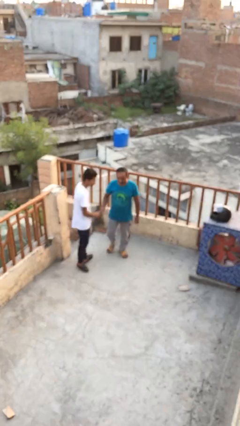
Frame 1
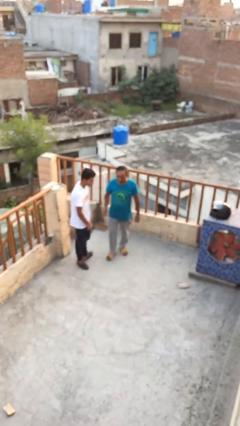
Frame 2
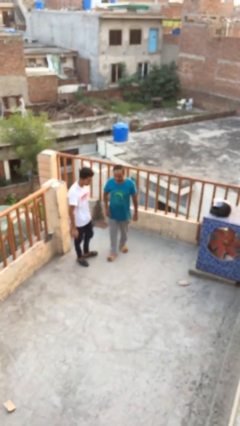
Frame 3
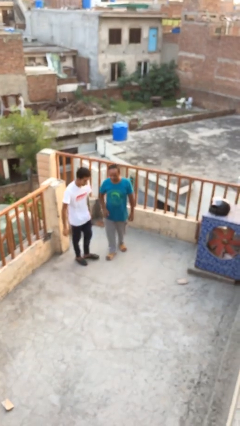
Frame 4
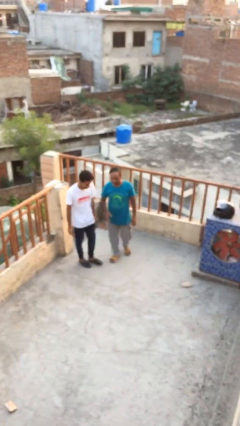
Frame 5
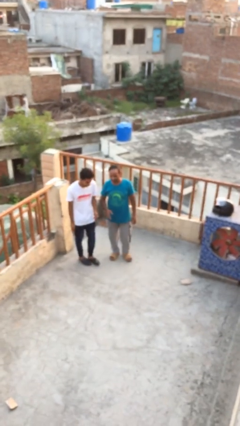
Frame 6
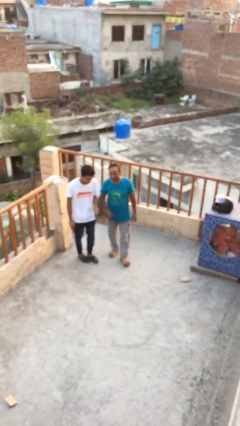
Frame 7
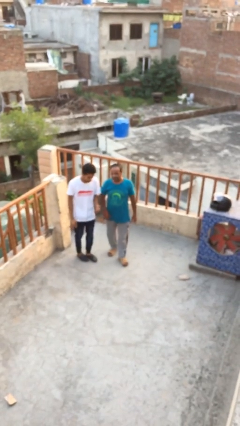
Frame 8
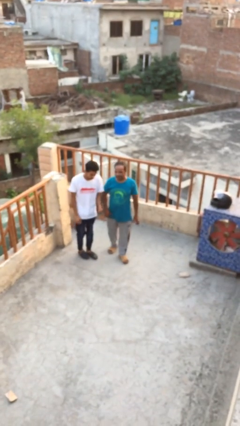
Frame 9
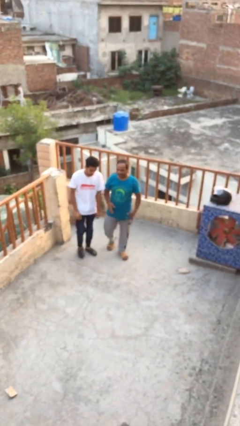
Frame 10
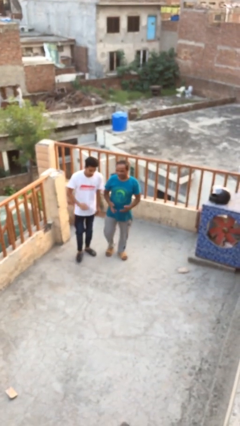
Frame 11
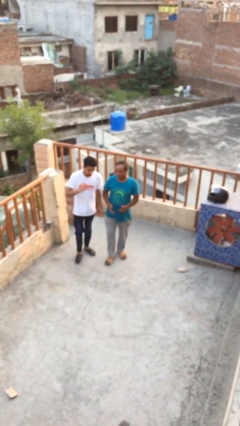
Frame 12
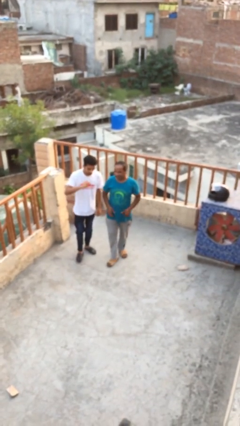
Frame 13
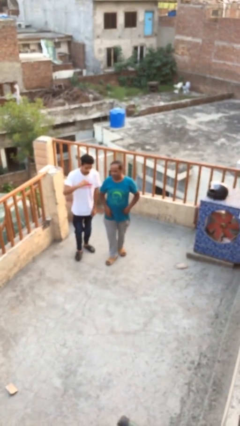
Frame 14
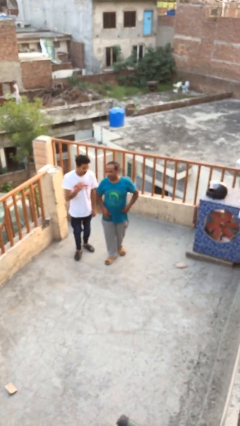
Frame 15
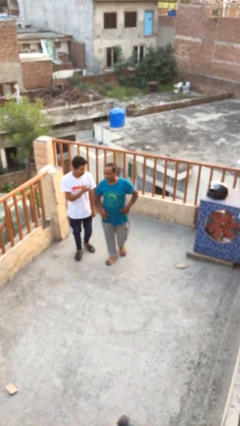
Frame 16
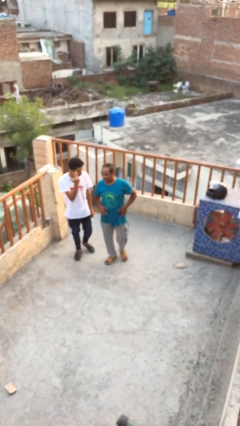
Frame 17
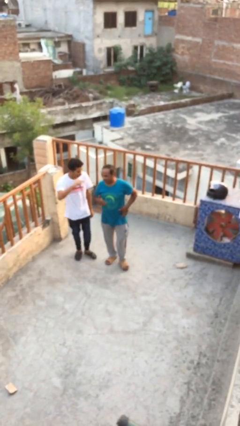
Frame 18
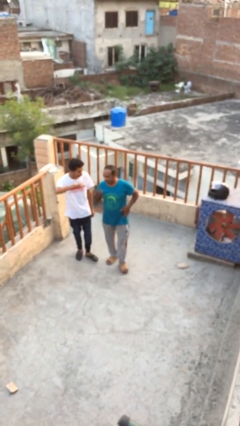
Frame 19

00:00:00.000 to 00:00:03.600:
person talks to person

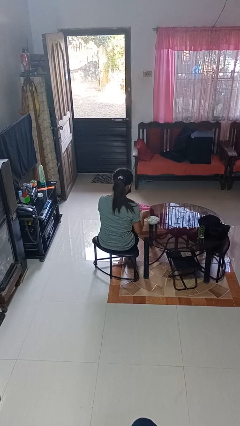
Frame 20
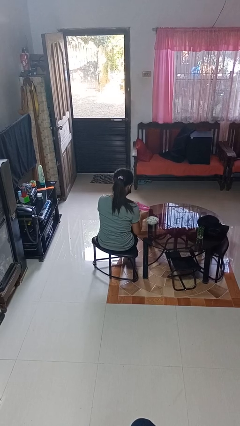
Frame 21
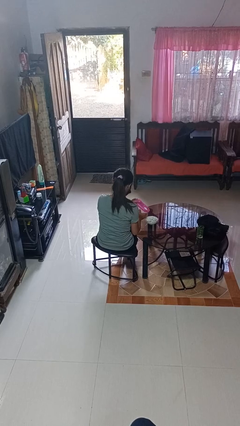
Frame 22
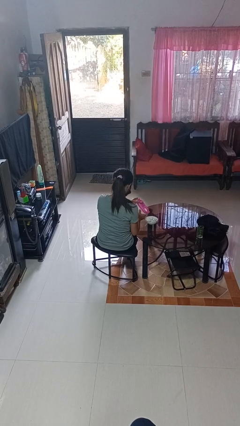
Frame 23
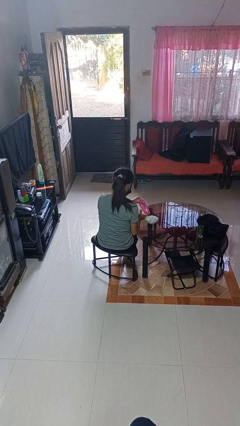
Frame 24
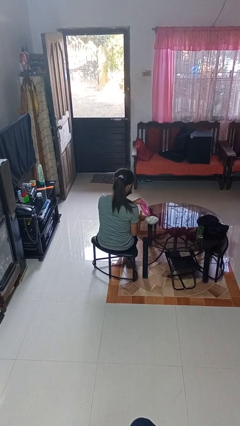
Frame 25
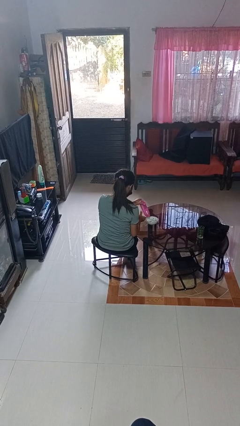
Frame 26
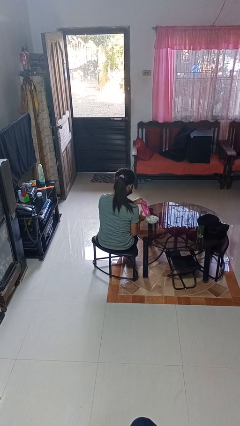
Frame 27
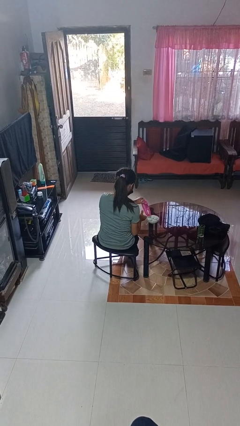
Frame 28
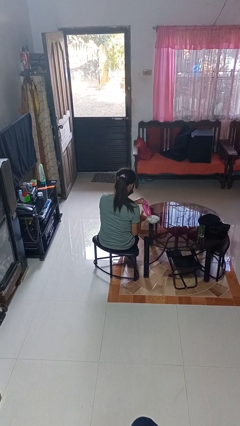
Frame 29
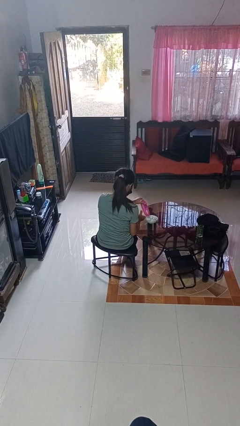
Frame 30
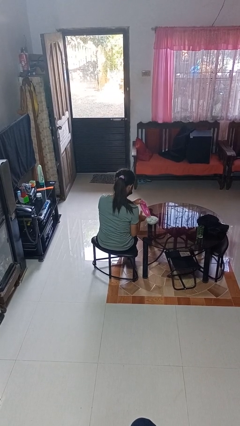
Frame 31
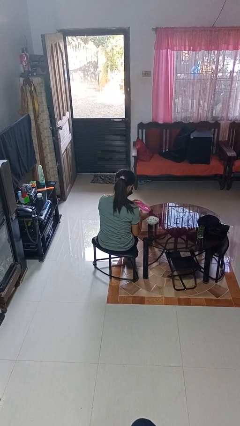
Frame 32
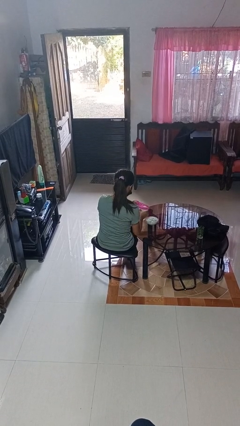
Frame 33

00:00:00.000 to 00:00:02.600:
person pours into bowl

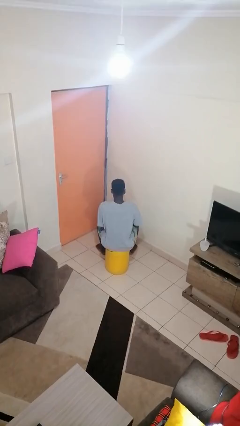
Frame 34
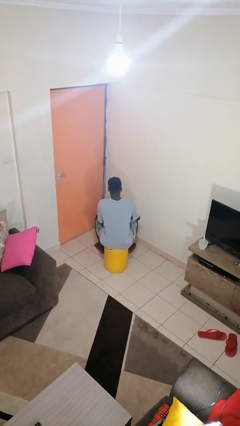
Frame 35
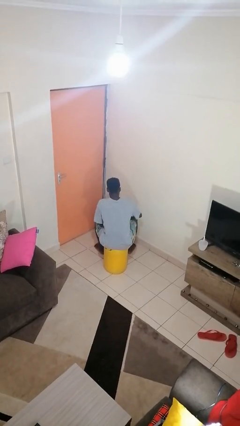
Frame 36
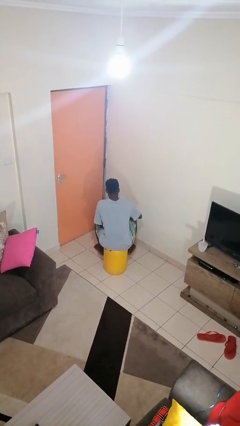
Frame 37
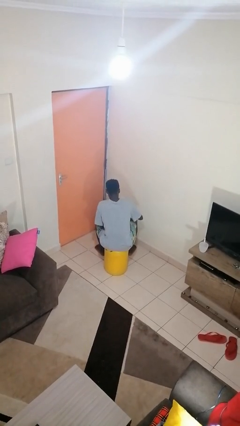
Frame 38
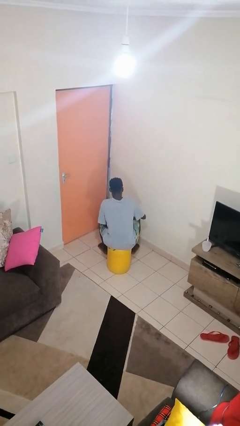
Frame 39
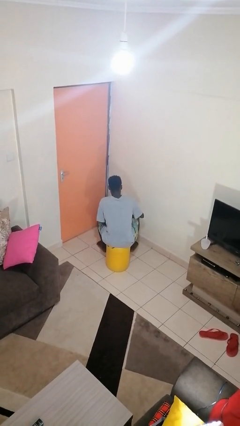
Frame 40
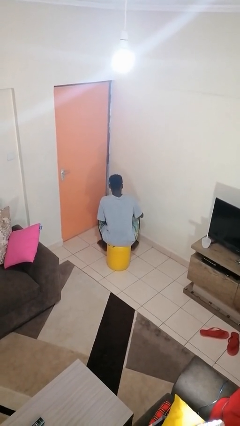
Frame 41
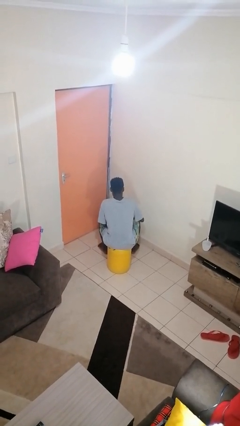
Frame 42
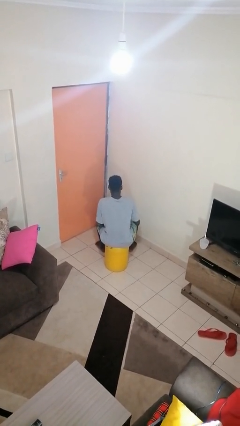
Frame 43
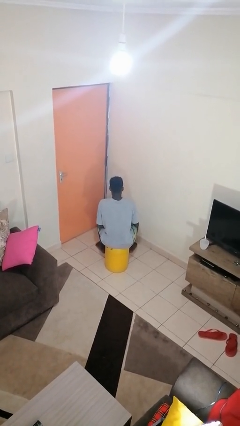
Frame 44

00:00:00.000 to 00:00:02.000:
person stirs mug

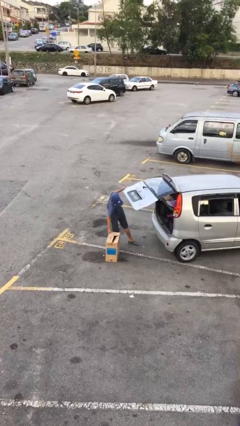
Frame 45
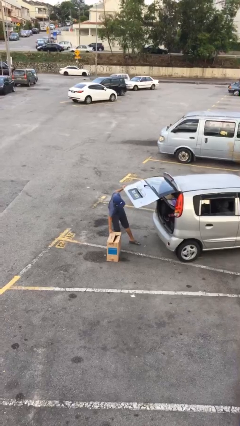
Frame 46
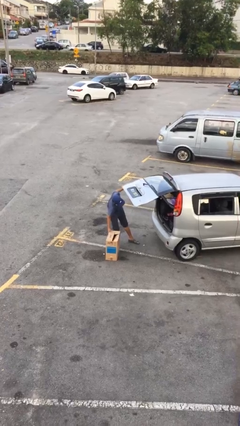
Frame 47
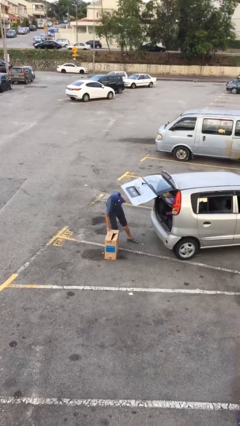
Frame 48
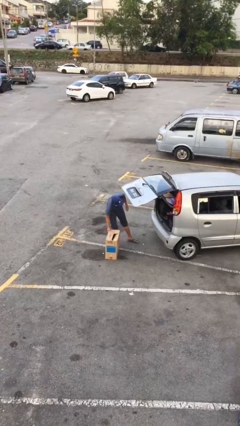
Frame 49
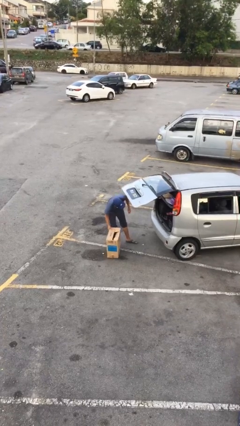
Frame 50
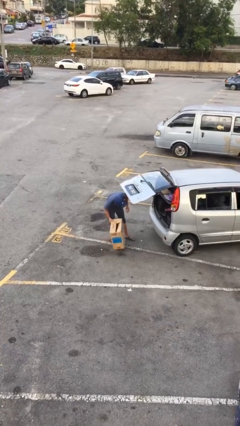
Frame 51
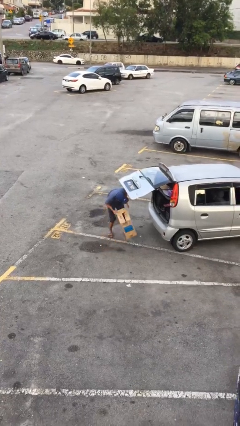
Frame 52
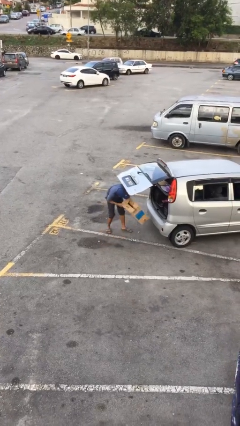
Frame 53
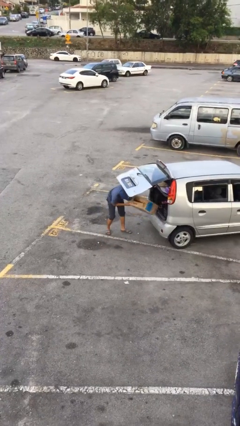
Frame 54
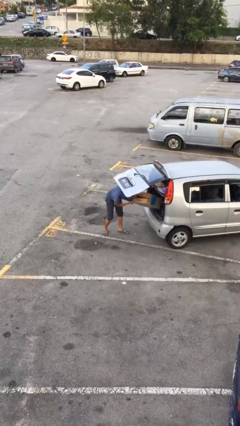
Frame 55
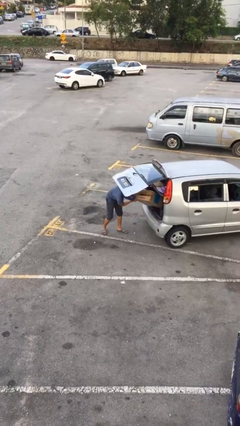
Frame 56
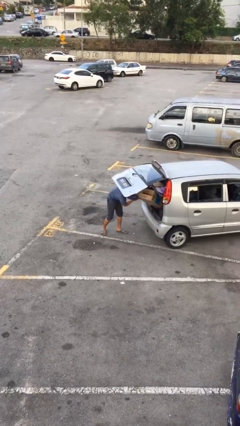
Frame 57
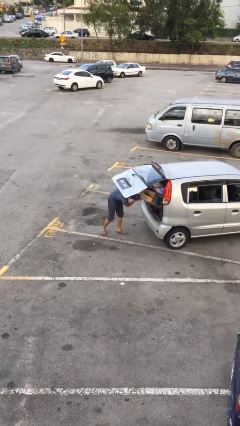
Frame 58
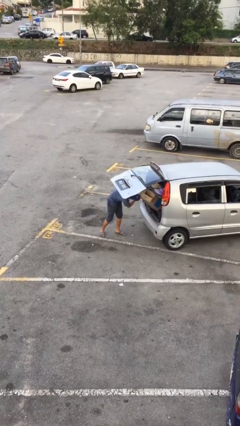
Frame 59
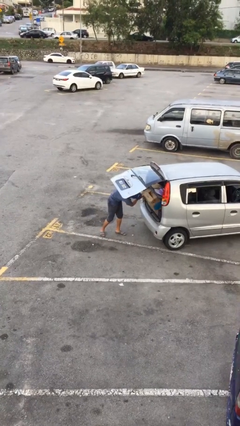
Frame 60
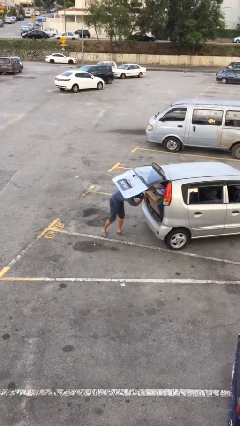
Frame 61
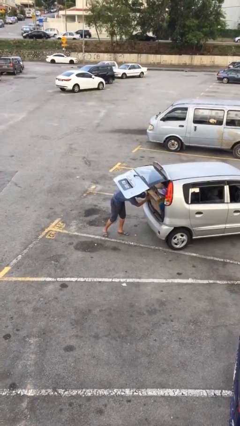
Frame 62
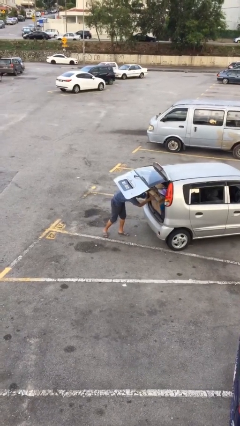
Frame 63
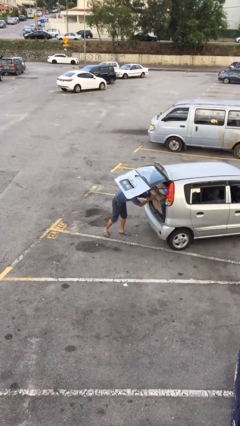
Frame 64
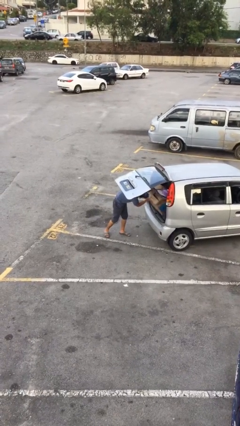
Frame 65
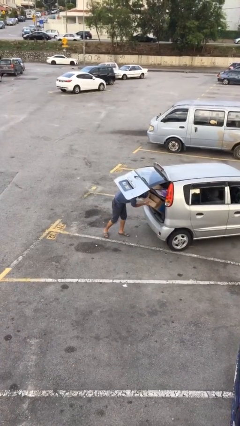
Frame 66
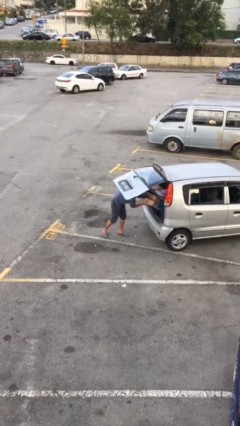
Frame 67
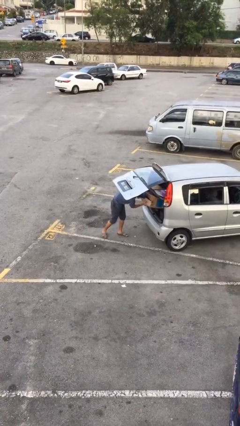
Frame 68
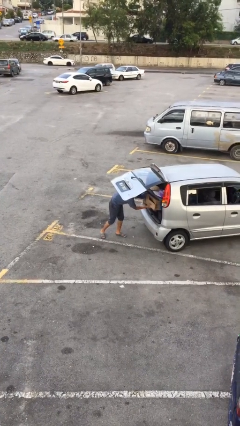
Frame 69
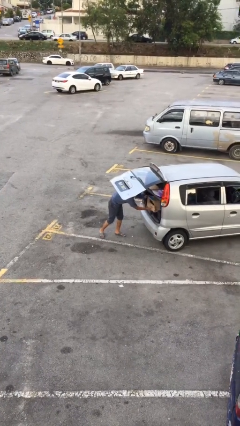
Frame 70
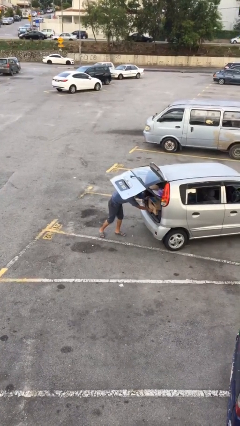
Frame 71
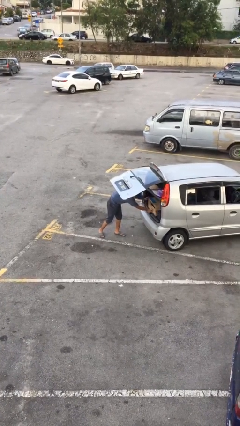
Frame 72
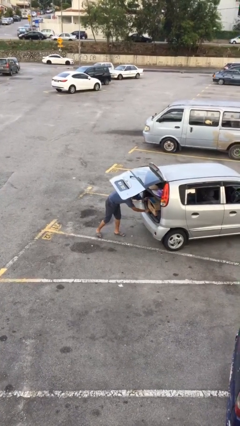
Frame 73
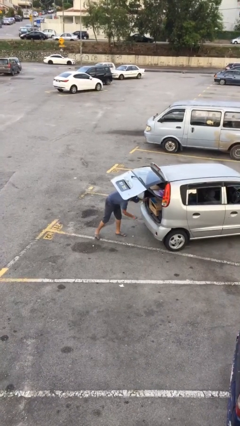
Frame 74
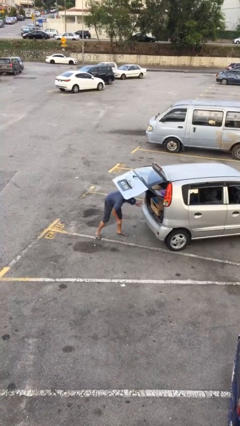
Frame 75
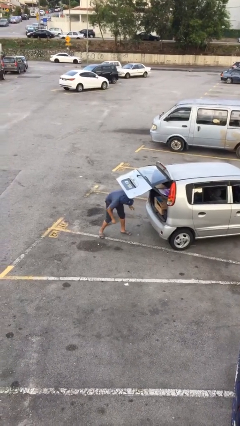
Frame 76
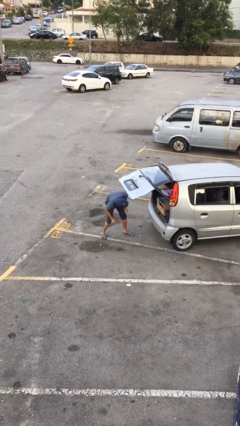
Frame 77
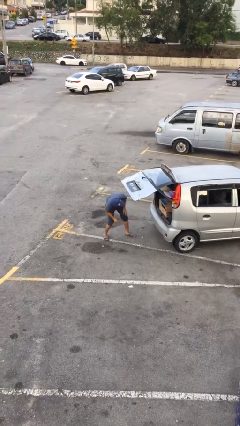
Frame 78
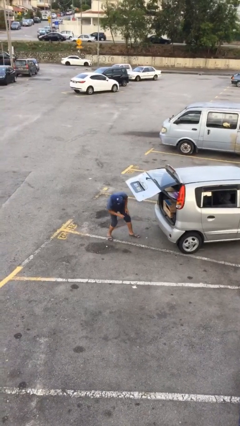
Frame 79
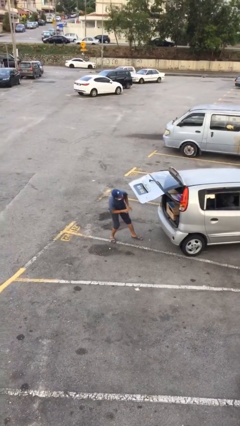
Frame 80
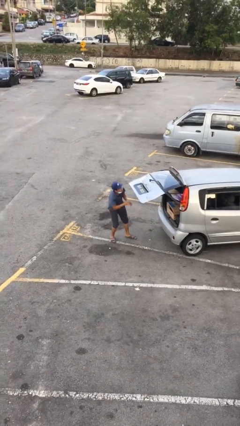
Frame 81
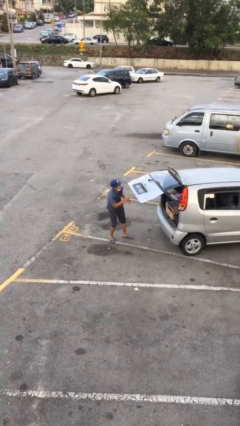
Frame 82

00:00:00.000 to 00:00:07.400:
person loads car

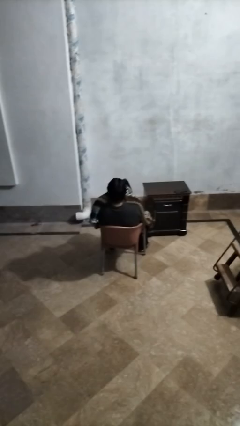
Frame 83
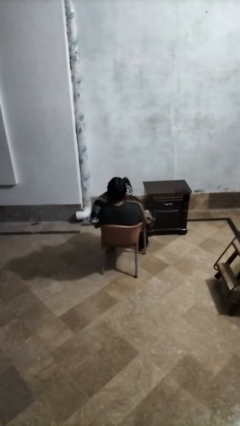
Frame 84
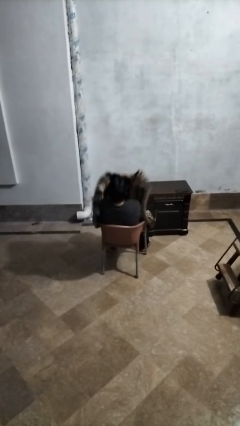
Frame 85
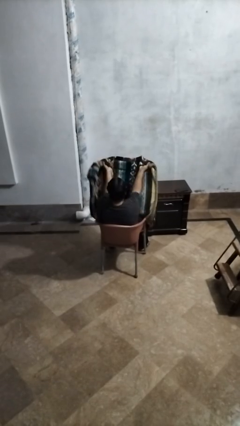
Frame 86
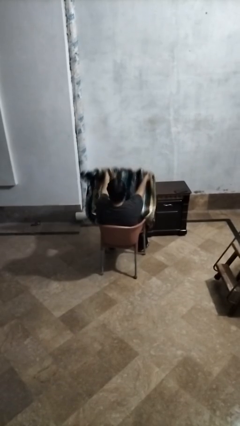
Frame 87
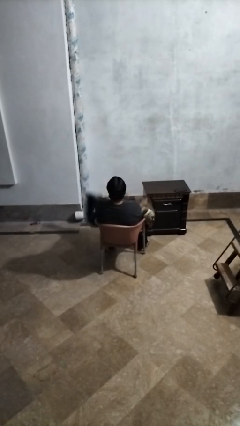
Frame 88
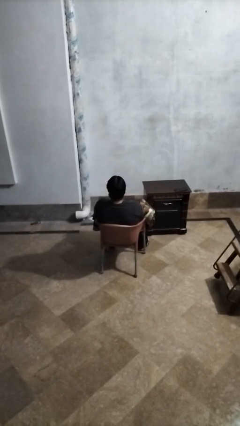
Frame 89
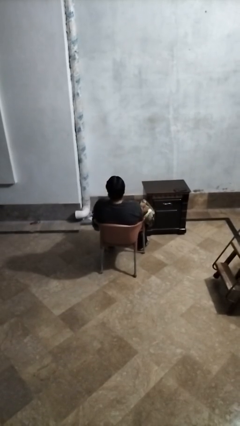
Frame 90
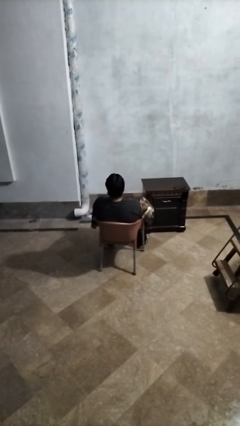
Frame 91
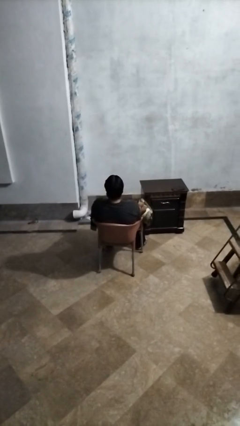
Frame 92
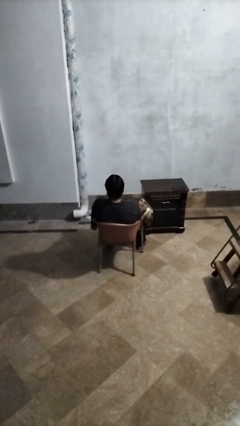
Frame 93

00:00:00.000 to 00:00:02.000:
person uncovers with blanket

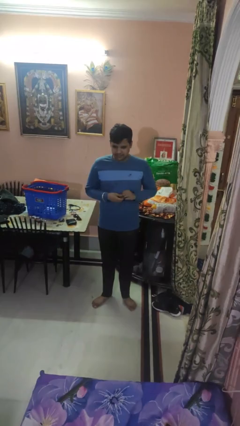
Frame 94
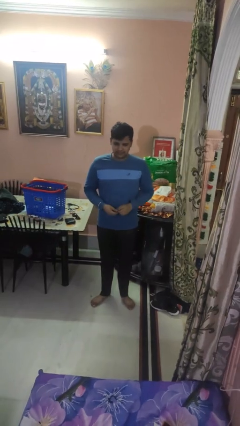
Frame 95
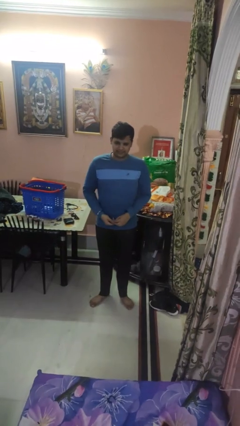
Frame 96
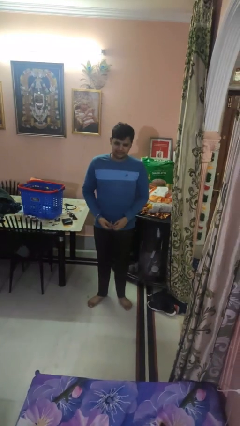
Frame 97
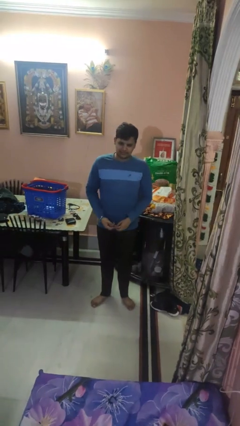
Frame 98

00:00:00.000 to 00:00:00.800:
person takes off earrings
